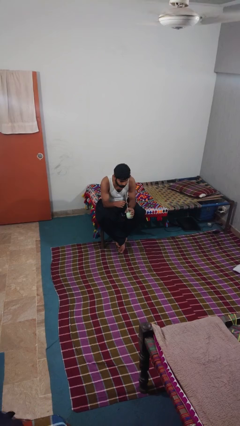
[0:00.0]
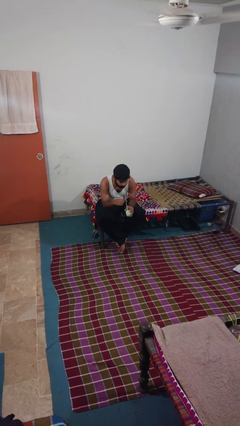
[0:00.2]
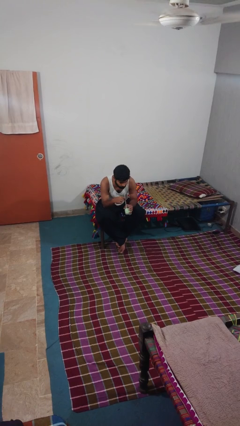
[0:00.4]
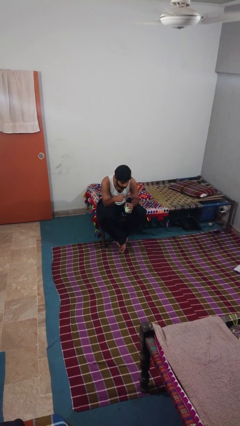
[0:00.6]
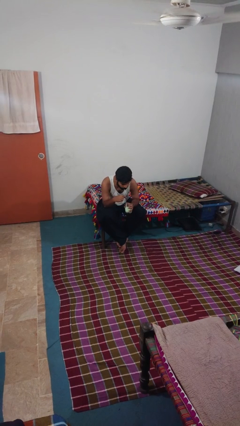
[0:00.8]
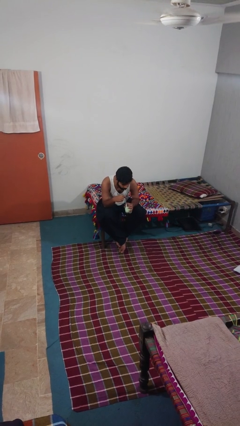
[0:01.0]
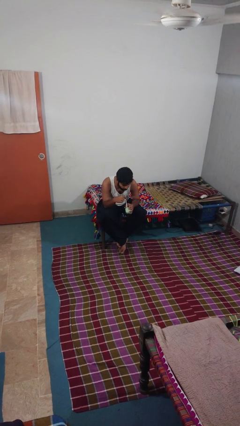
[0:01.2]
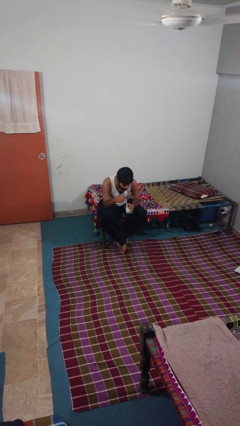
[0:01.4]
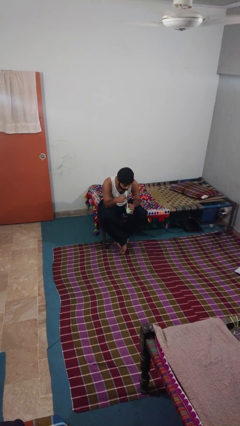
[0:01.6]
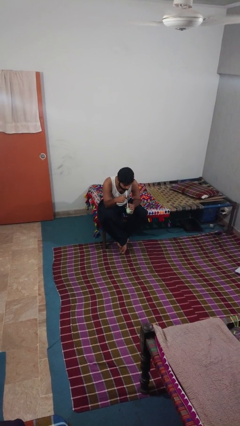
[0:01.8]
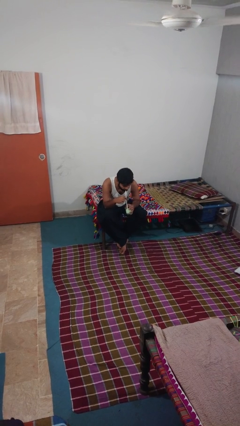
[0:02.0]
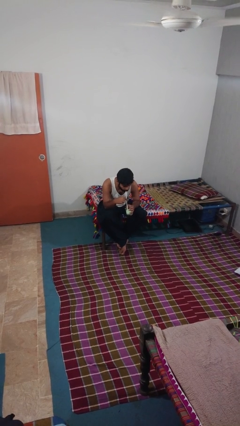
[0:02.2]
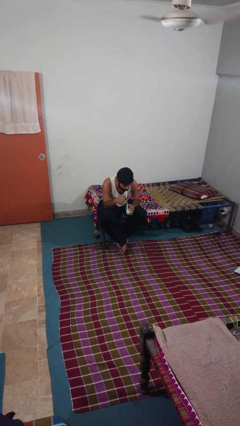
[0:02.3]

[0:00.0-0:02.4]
person drinks from straw

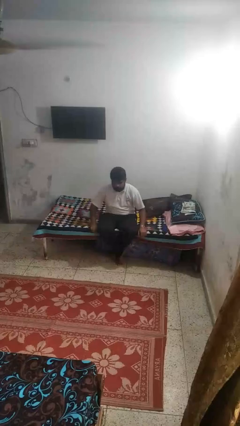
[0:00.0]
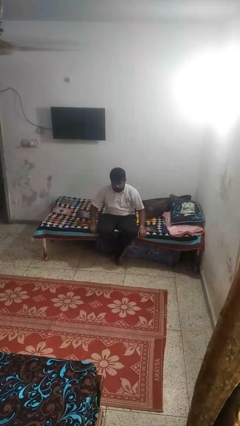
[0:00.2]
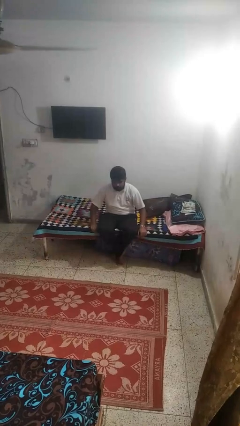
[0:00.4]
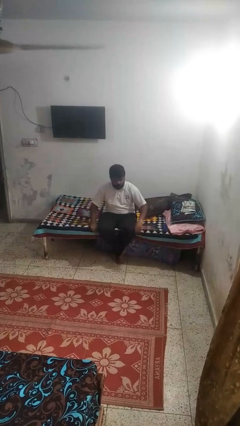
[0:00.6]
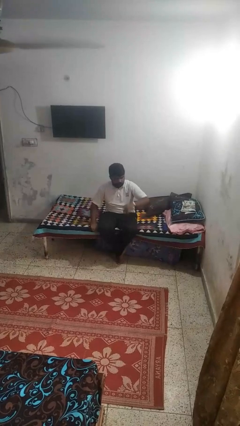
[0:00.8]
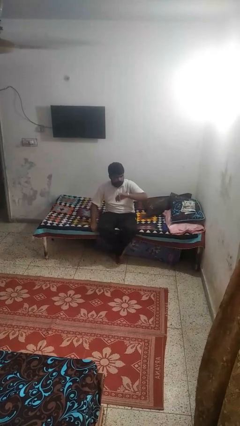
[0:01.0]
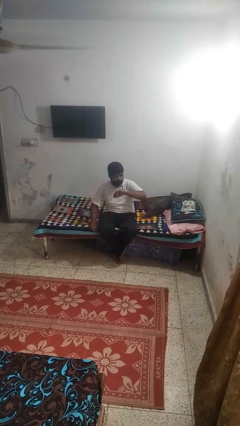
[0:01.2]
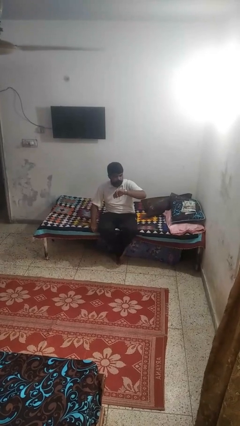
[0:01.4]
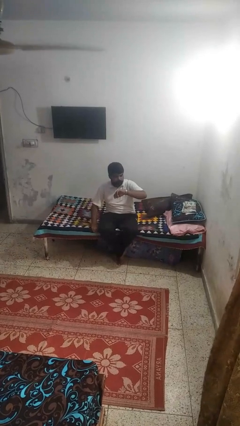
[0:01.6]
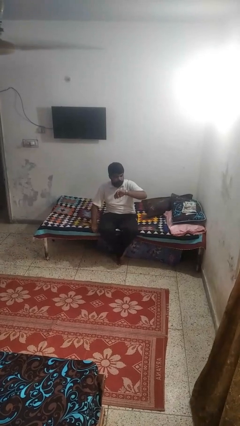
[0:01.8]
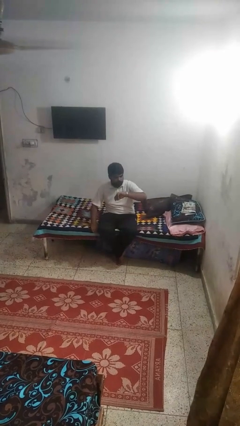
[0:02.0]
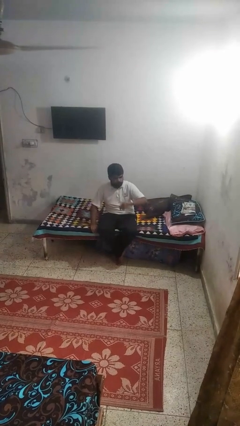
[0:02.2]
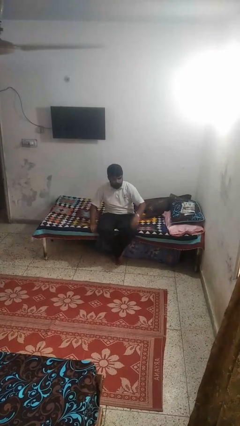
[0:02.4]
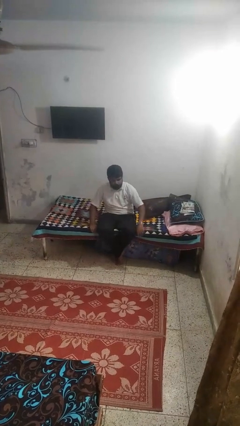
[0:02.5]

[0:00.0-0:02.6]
person looks at wristwatch

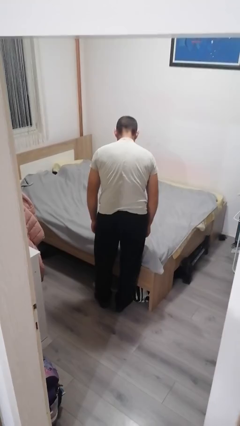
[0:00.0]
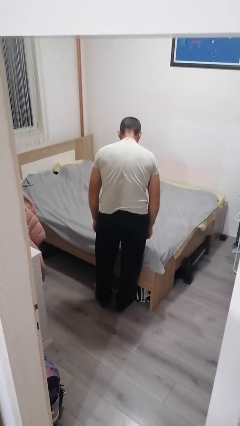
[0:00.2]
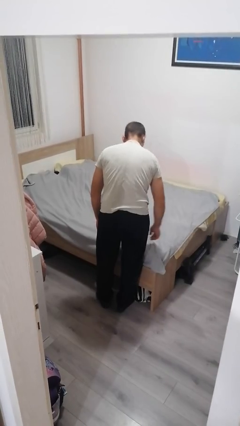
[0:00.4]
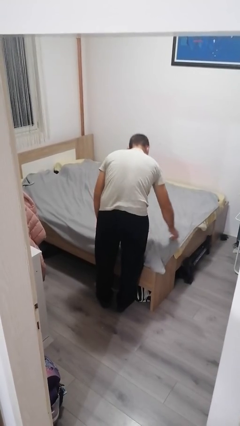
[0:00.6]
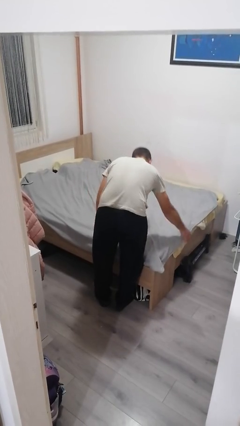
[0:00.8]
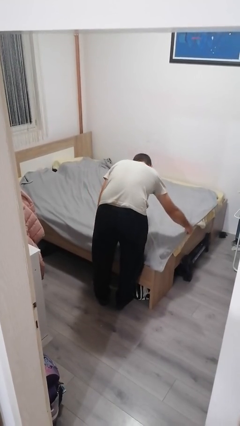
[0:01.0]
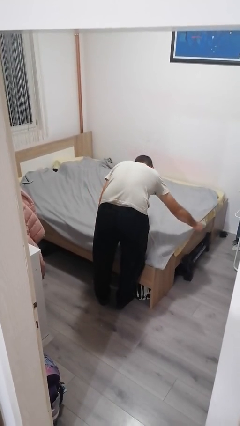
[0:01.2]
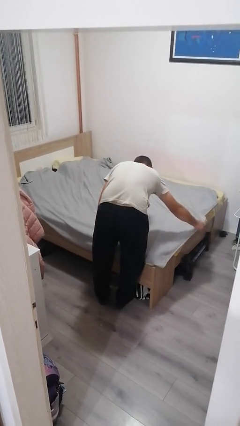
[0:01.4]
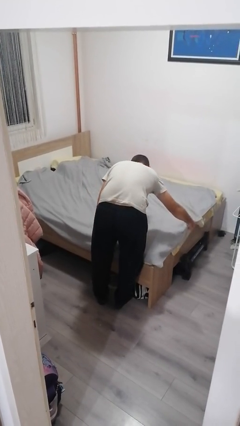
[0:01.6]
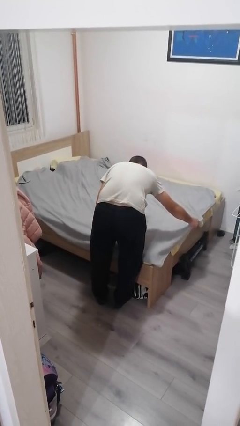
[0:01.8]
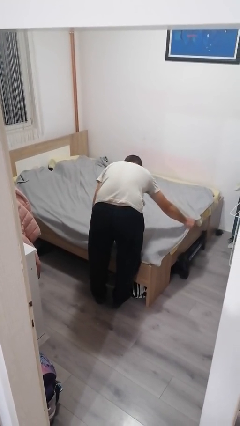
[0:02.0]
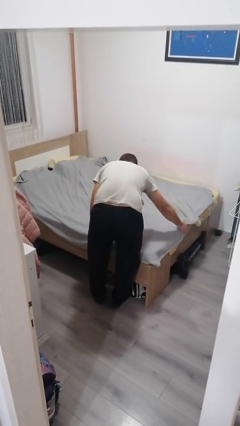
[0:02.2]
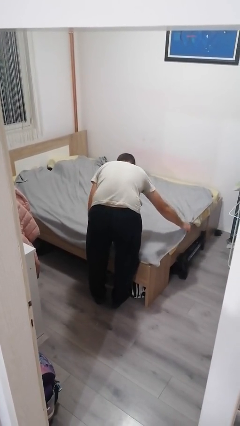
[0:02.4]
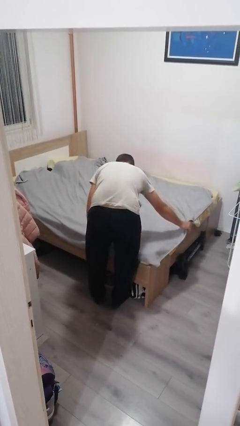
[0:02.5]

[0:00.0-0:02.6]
person makes bed

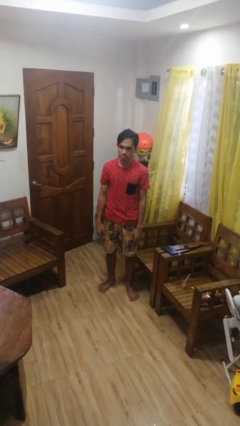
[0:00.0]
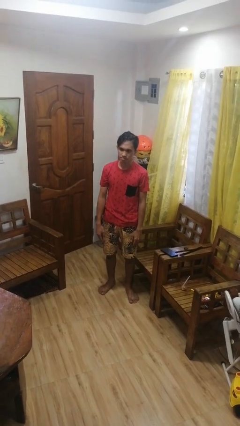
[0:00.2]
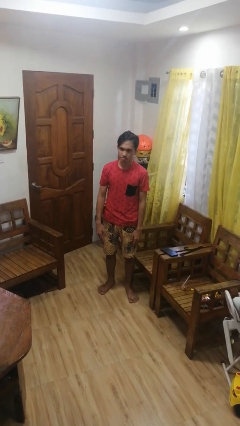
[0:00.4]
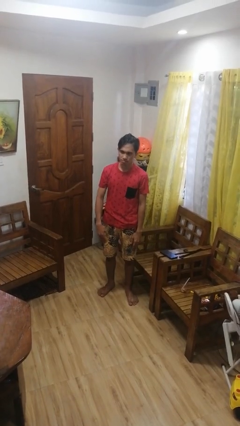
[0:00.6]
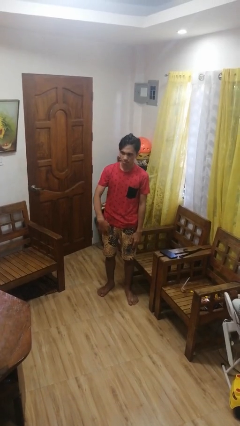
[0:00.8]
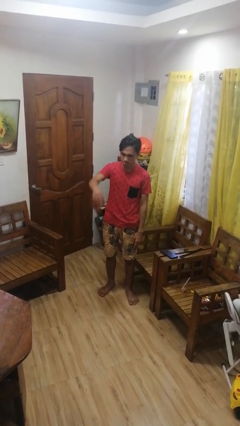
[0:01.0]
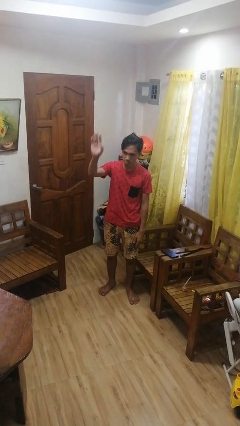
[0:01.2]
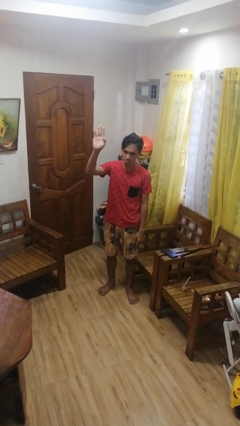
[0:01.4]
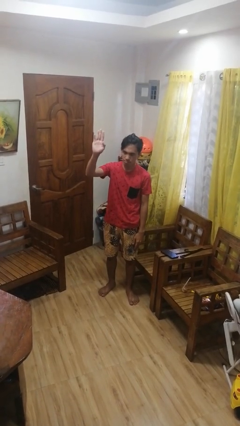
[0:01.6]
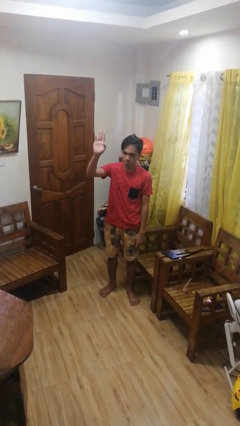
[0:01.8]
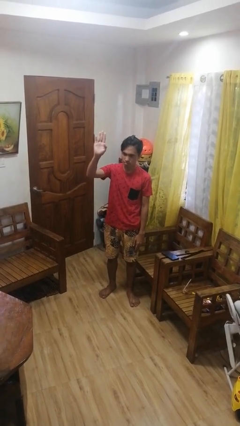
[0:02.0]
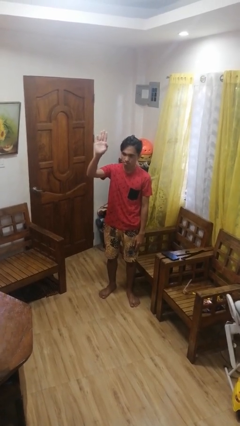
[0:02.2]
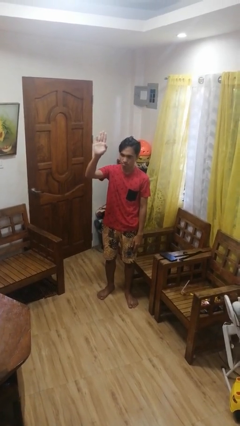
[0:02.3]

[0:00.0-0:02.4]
person gestures swipe up

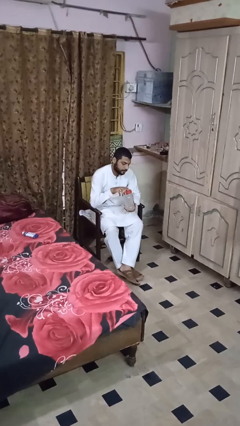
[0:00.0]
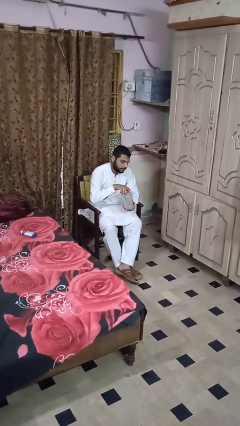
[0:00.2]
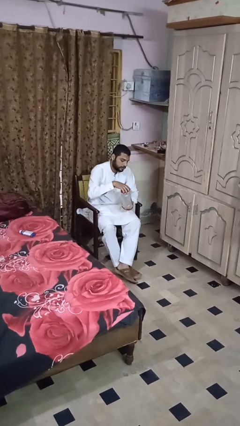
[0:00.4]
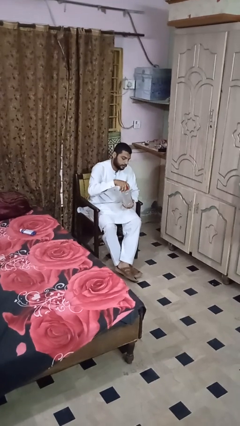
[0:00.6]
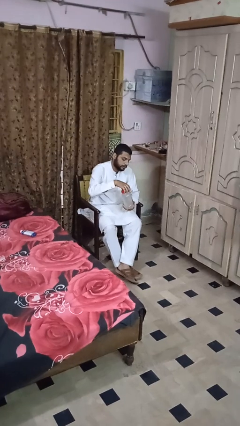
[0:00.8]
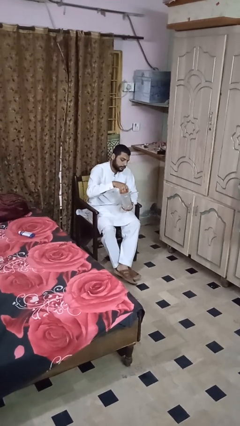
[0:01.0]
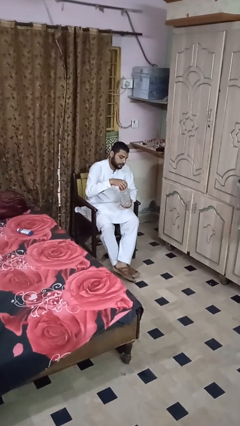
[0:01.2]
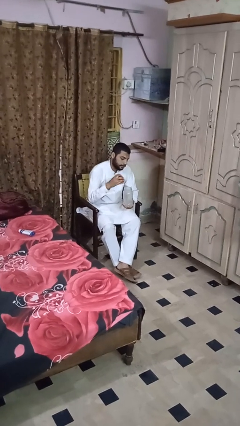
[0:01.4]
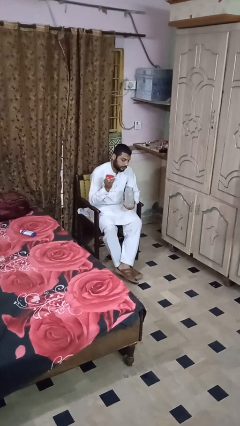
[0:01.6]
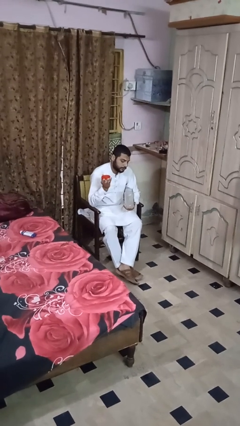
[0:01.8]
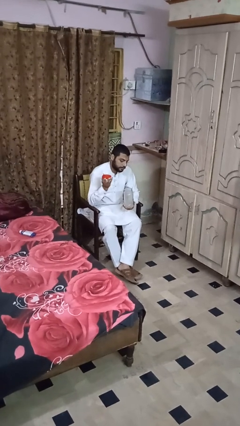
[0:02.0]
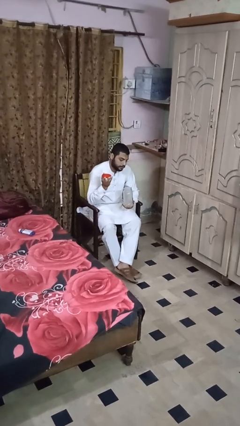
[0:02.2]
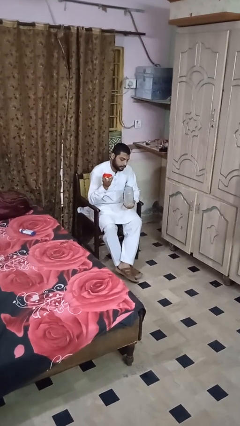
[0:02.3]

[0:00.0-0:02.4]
person opens jar

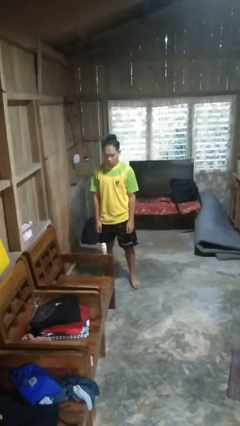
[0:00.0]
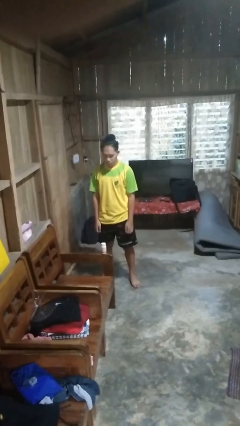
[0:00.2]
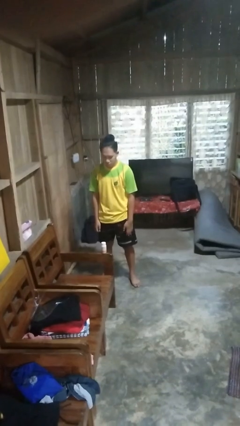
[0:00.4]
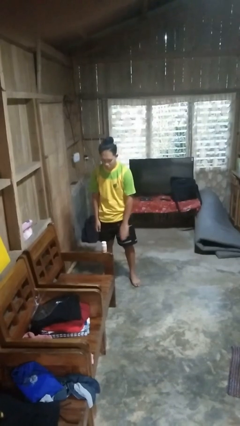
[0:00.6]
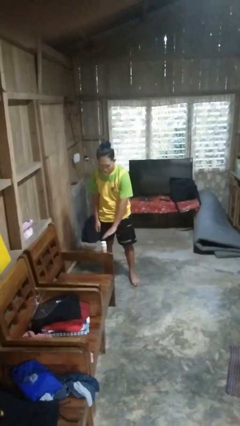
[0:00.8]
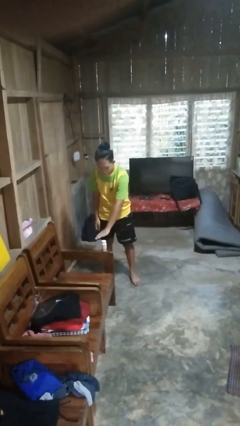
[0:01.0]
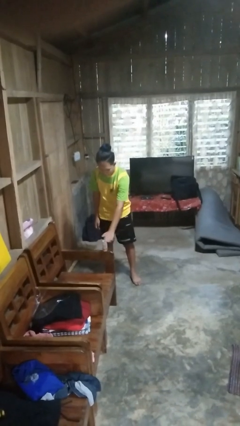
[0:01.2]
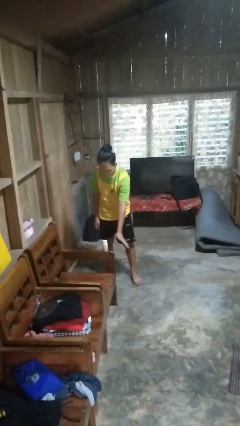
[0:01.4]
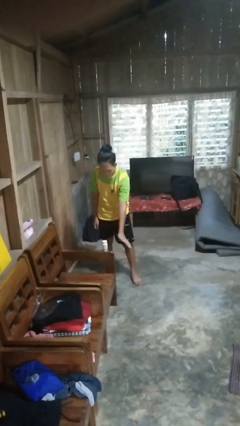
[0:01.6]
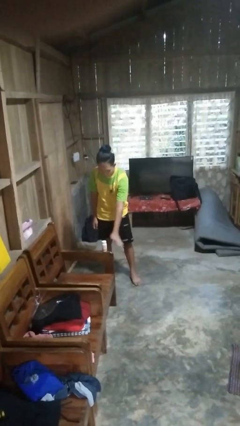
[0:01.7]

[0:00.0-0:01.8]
person waves hand over object

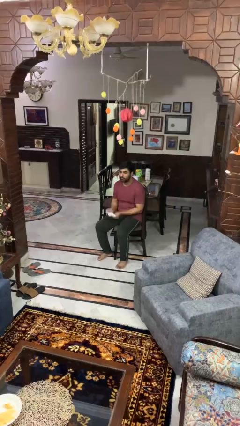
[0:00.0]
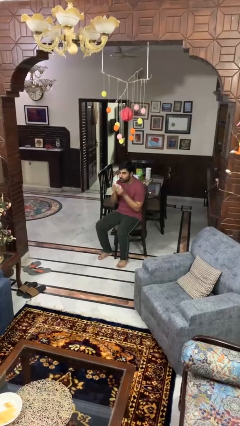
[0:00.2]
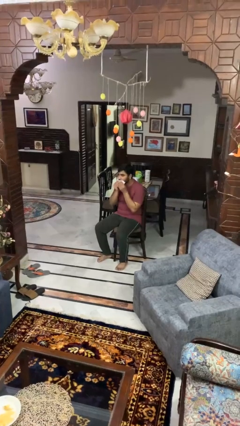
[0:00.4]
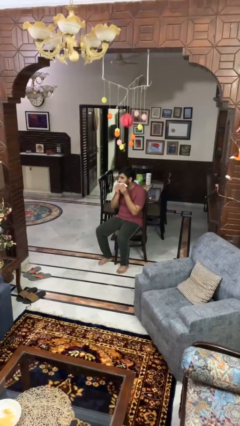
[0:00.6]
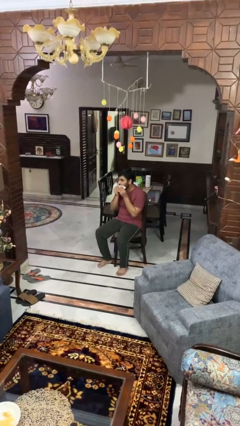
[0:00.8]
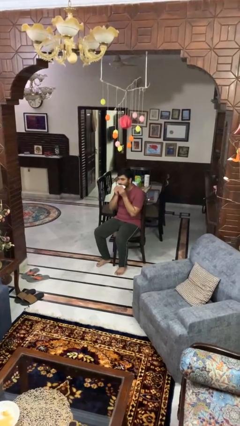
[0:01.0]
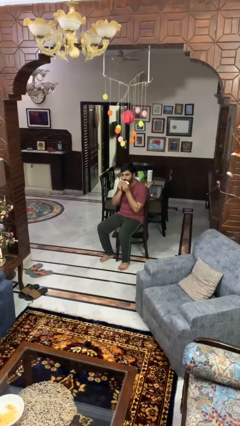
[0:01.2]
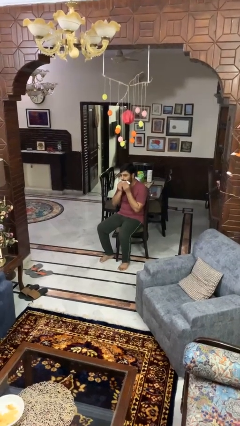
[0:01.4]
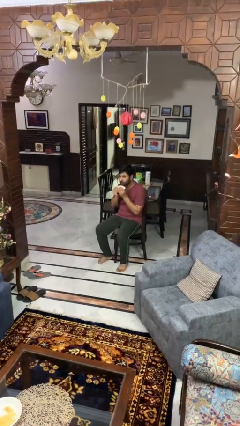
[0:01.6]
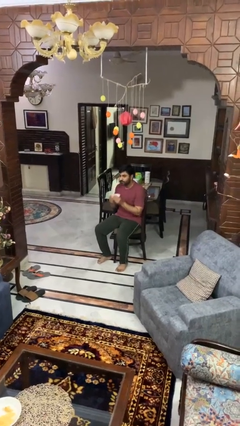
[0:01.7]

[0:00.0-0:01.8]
person wipes mouth with napkin

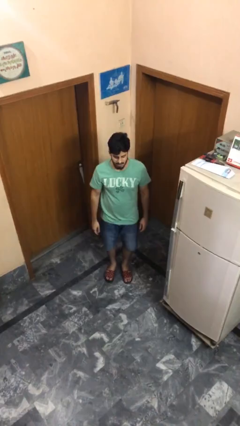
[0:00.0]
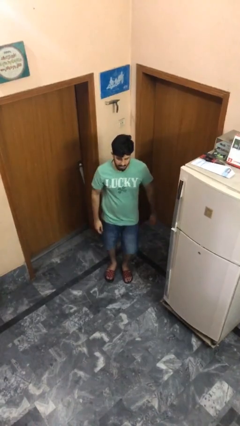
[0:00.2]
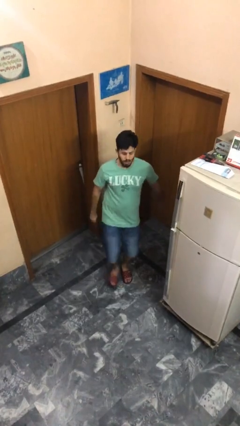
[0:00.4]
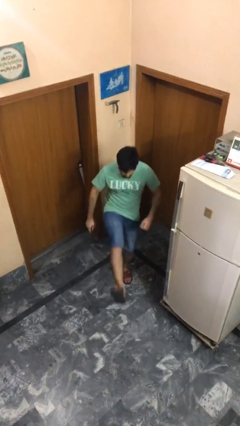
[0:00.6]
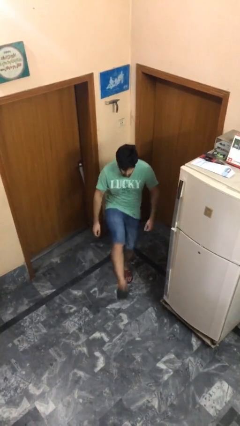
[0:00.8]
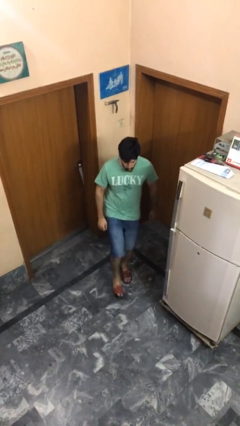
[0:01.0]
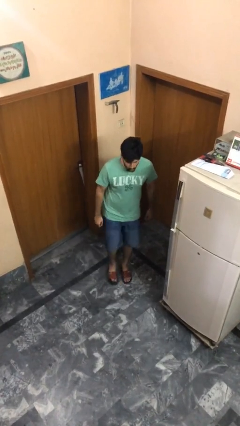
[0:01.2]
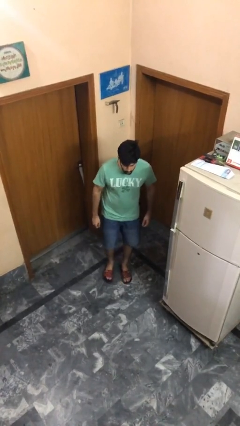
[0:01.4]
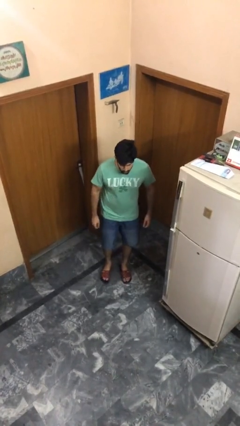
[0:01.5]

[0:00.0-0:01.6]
person karate kicks
